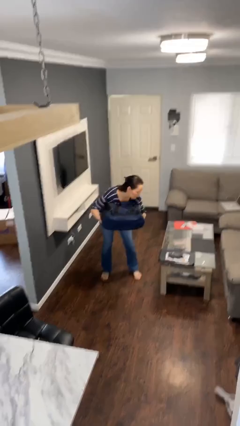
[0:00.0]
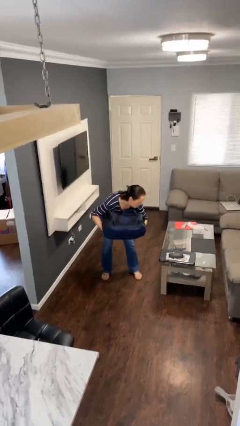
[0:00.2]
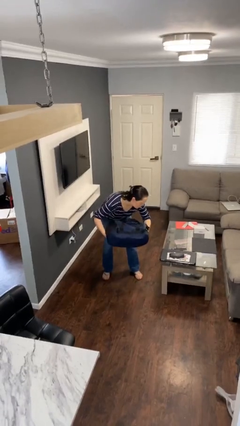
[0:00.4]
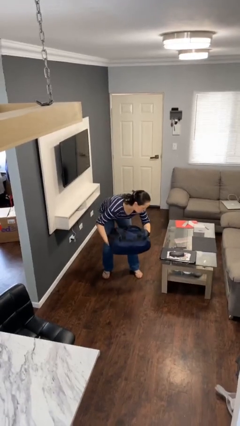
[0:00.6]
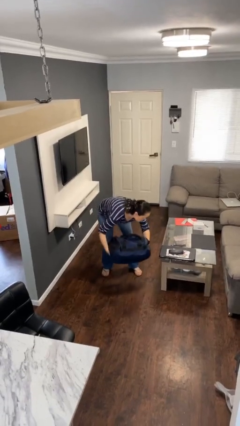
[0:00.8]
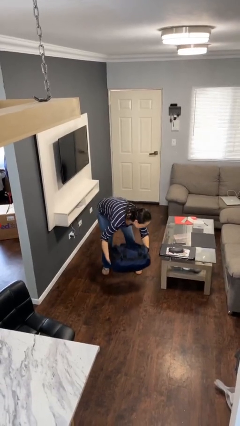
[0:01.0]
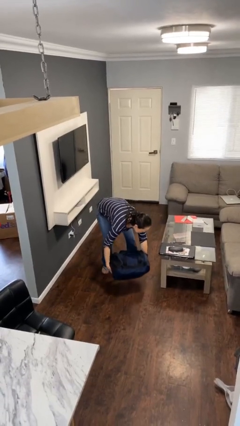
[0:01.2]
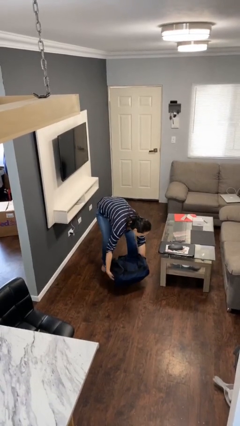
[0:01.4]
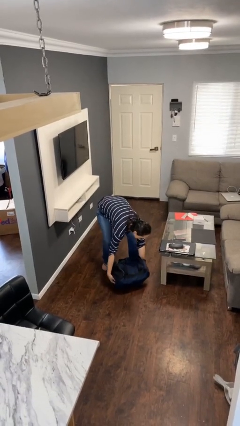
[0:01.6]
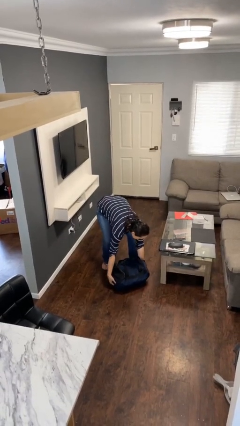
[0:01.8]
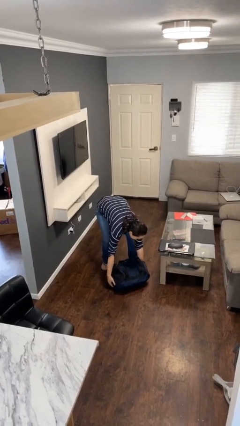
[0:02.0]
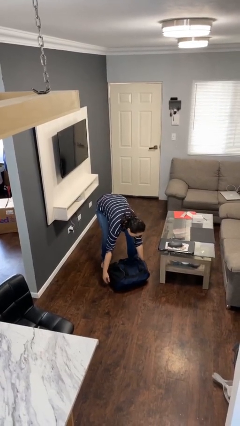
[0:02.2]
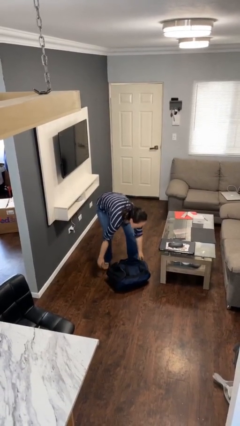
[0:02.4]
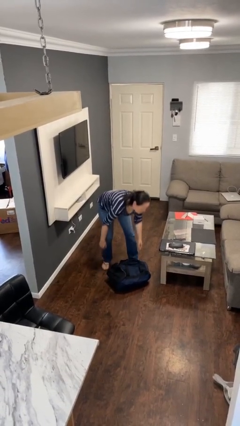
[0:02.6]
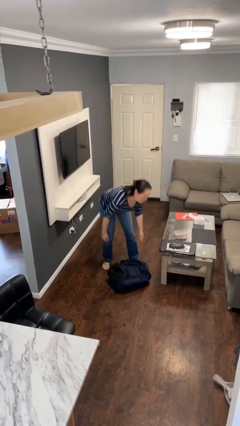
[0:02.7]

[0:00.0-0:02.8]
person puts down object on floor

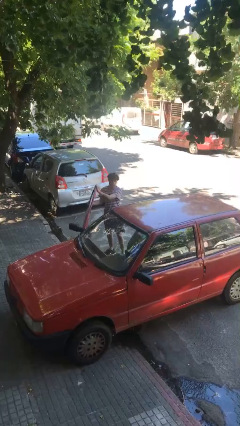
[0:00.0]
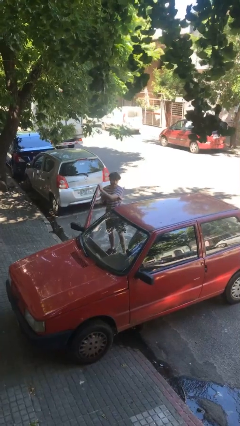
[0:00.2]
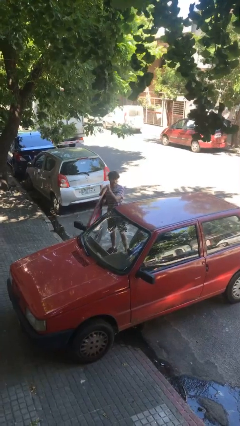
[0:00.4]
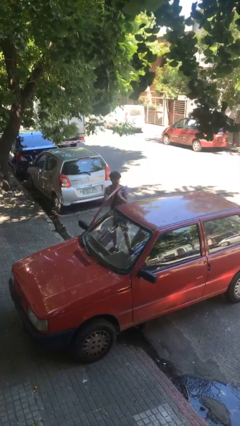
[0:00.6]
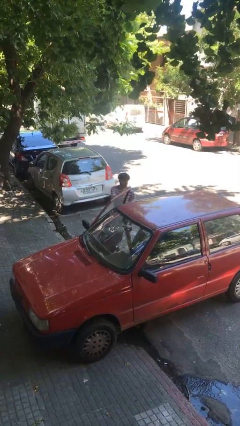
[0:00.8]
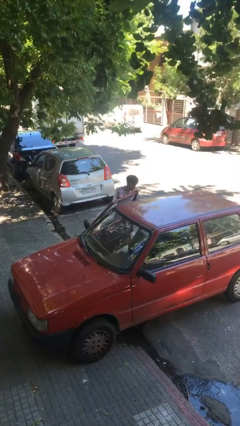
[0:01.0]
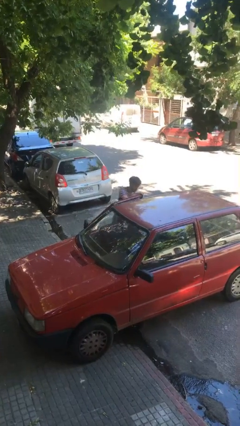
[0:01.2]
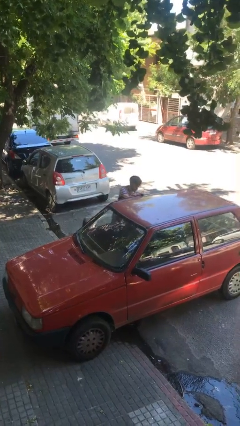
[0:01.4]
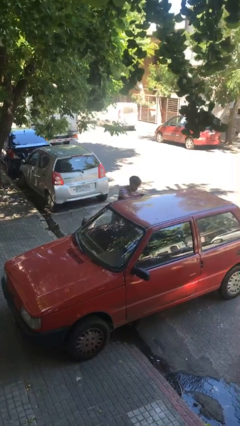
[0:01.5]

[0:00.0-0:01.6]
person closes car door

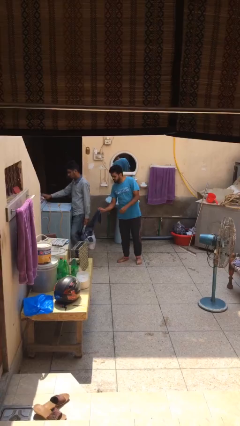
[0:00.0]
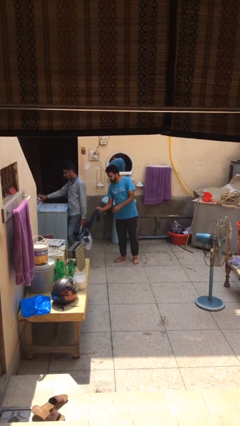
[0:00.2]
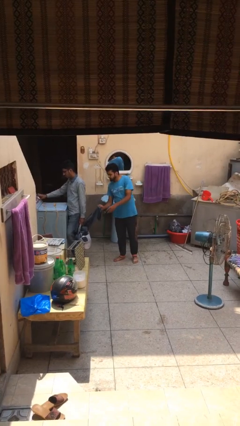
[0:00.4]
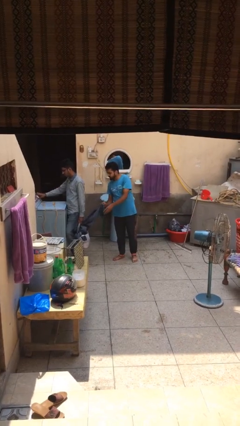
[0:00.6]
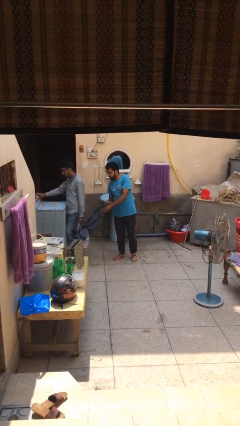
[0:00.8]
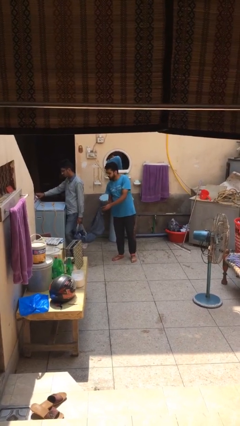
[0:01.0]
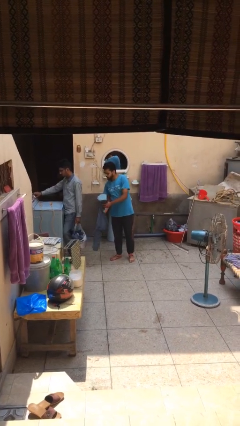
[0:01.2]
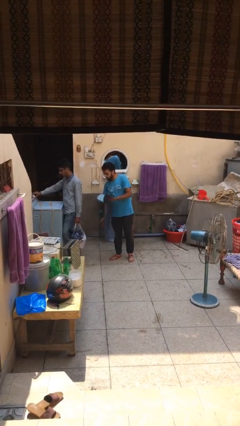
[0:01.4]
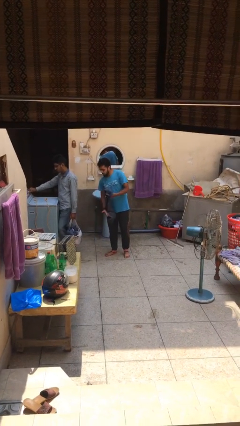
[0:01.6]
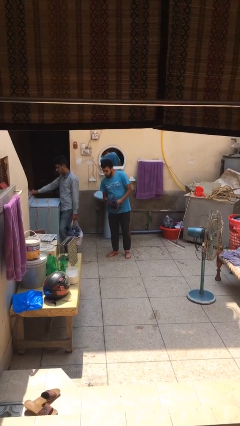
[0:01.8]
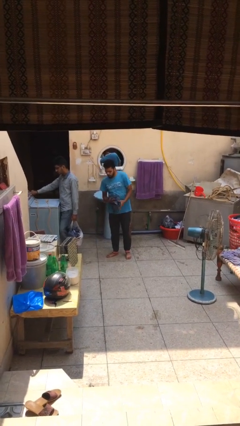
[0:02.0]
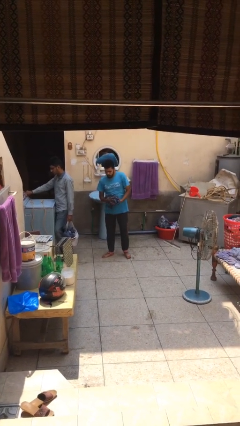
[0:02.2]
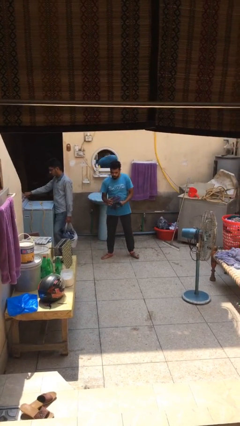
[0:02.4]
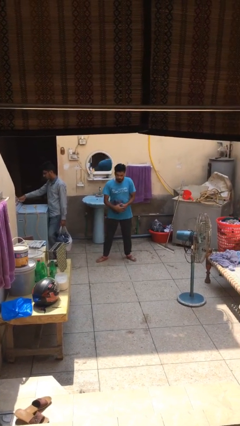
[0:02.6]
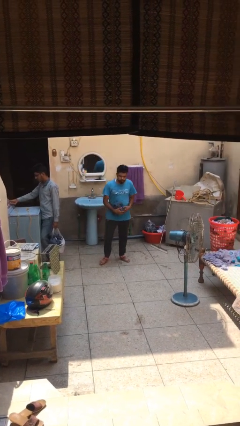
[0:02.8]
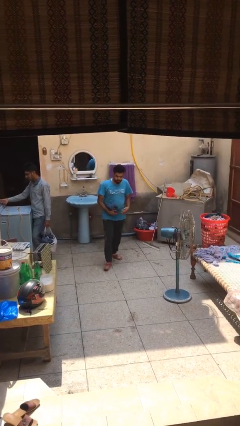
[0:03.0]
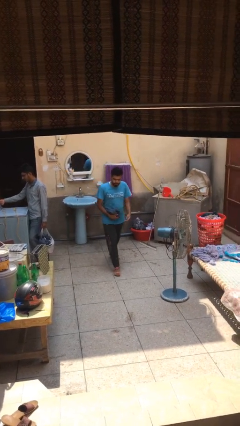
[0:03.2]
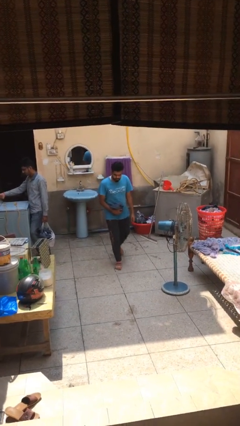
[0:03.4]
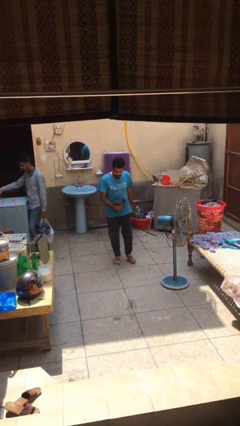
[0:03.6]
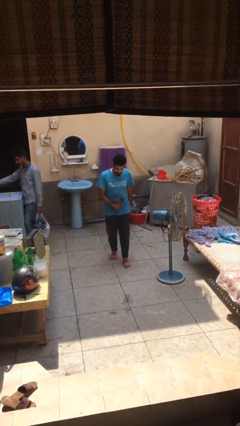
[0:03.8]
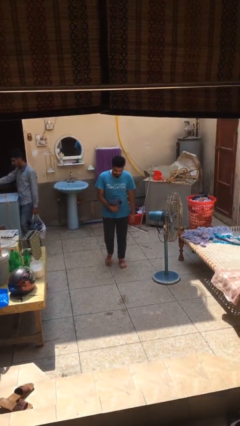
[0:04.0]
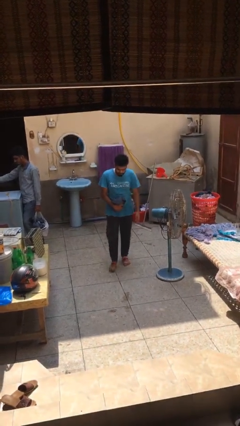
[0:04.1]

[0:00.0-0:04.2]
person steals object from person

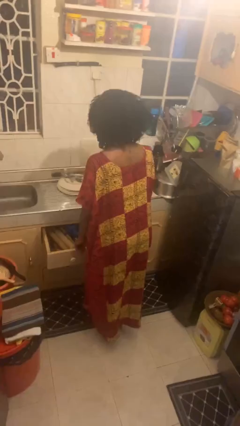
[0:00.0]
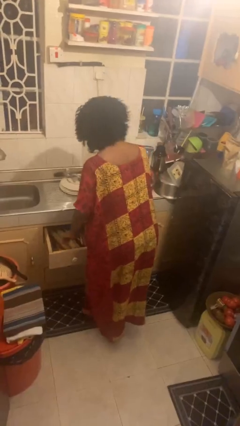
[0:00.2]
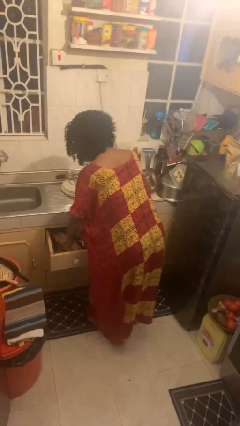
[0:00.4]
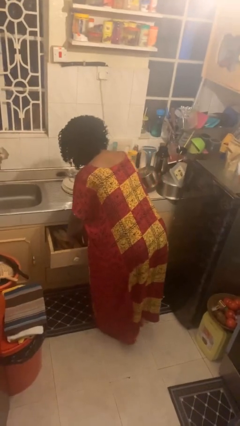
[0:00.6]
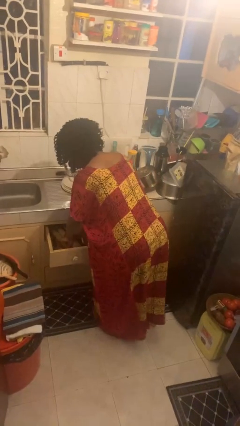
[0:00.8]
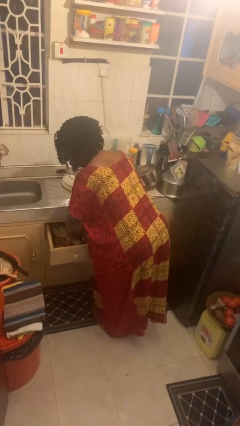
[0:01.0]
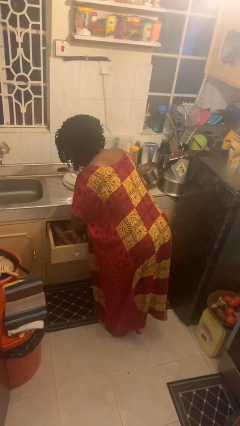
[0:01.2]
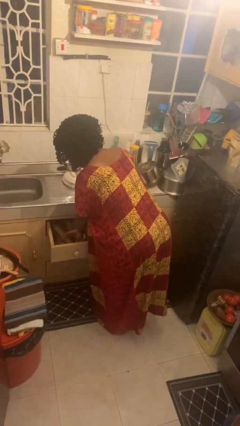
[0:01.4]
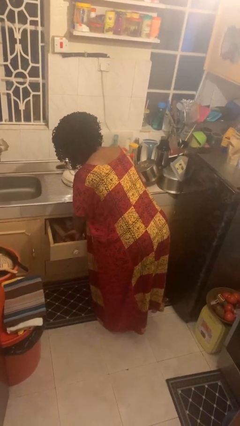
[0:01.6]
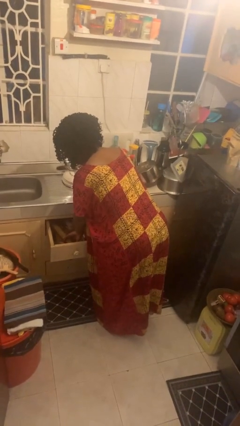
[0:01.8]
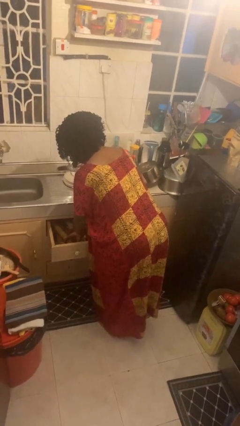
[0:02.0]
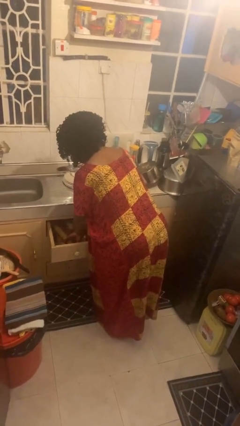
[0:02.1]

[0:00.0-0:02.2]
person searches in kitchen drawer

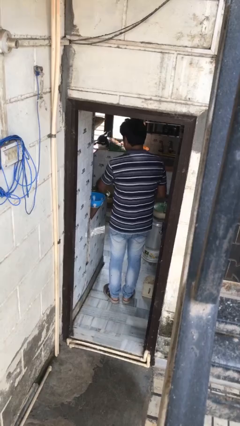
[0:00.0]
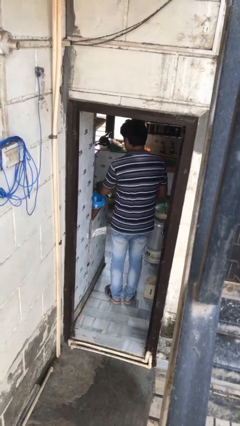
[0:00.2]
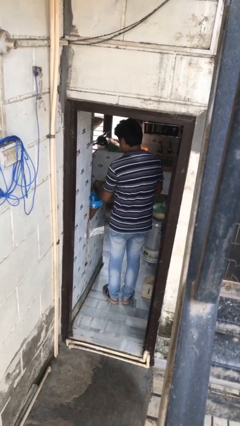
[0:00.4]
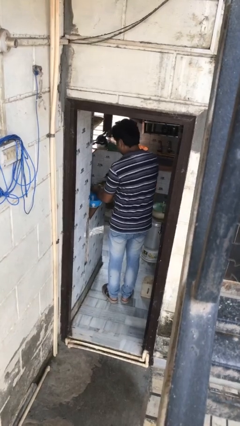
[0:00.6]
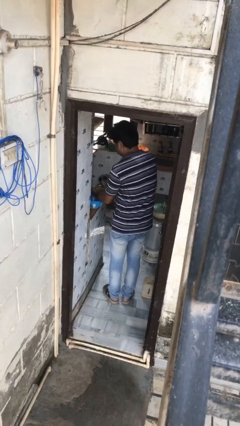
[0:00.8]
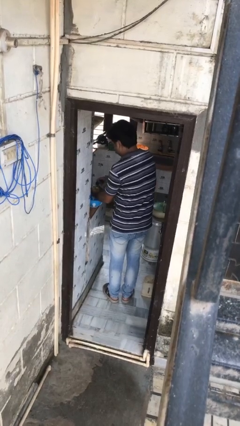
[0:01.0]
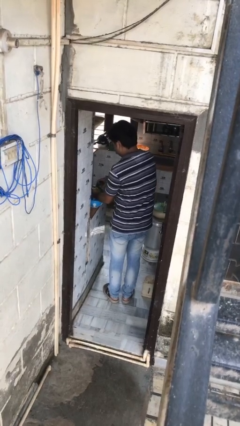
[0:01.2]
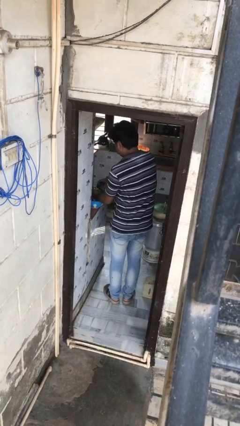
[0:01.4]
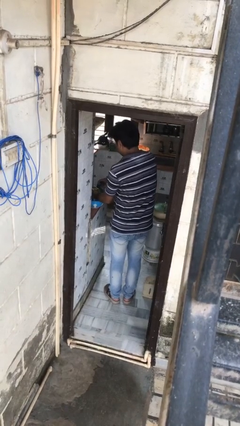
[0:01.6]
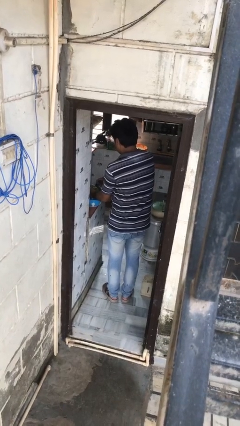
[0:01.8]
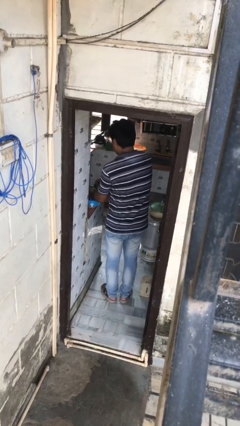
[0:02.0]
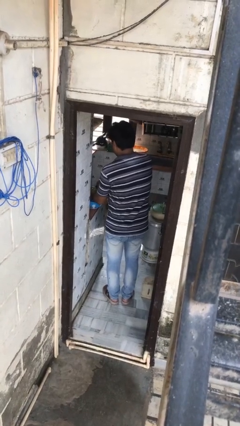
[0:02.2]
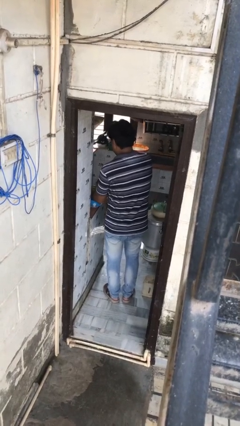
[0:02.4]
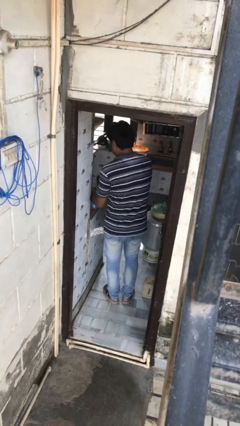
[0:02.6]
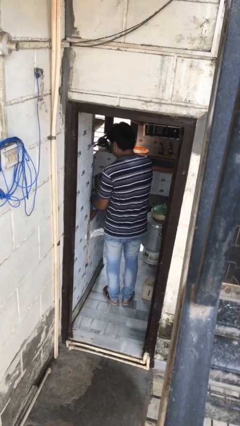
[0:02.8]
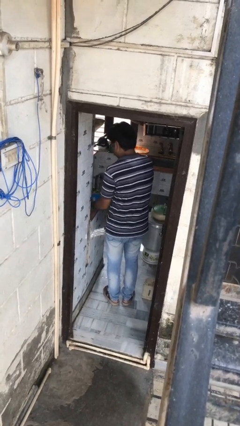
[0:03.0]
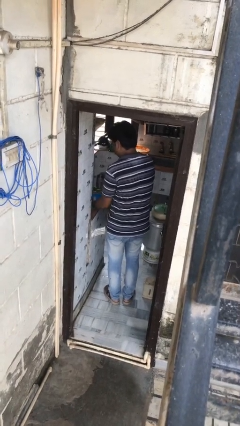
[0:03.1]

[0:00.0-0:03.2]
person washes dish

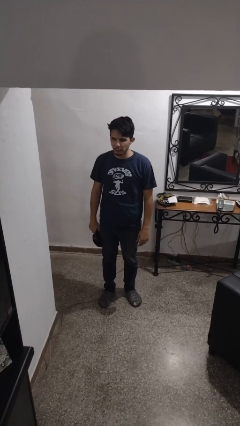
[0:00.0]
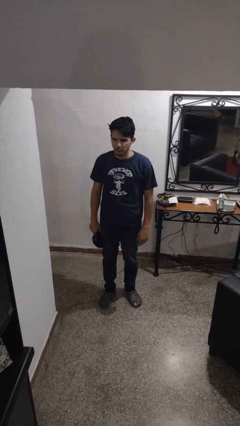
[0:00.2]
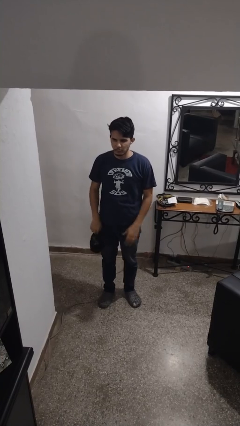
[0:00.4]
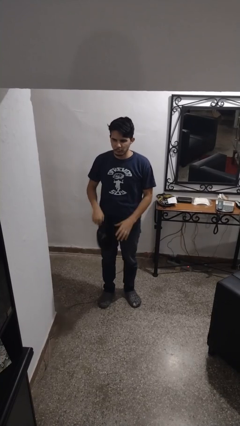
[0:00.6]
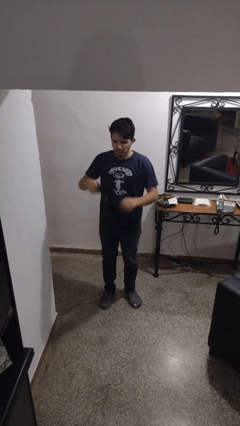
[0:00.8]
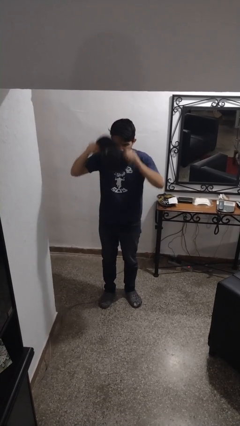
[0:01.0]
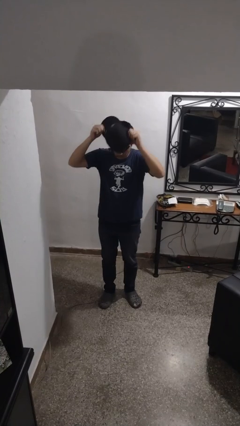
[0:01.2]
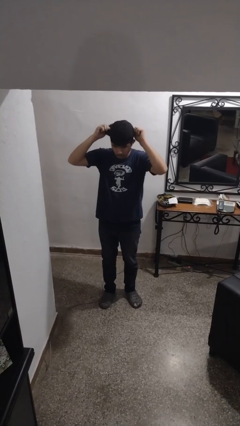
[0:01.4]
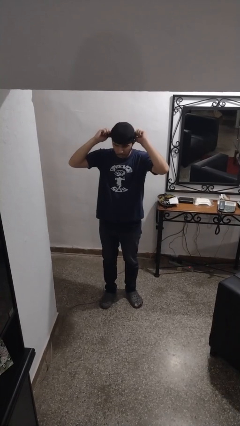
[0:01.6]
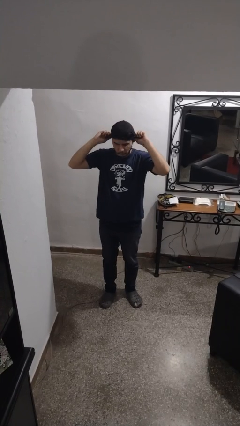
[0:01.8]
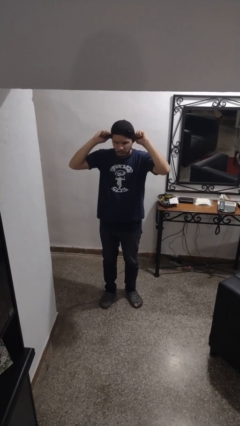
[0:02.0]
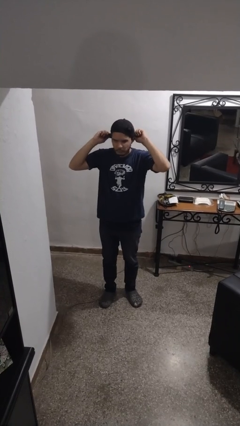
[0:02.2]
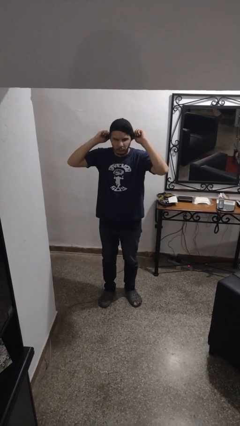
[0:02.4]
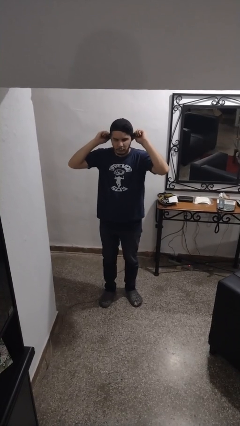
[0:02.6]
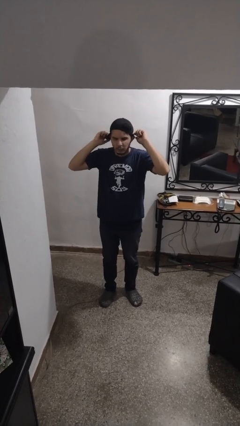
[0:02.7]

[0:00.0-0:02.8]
person puts on hat

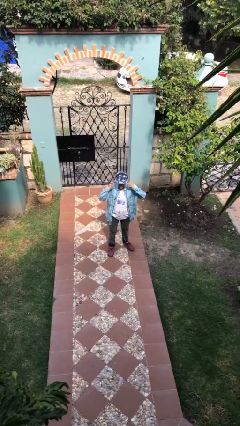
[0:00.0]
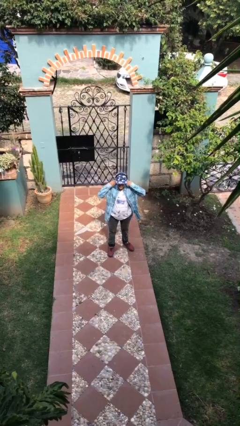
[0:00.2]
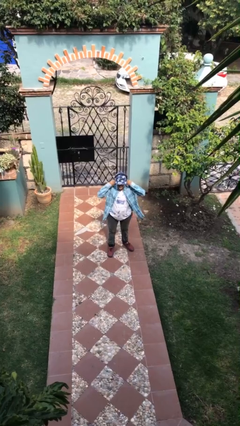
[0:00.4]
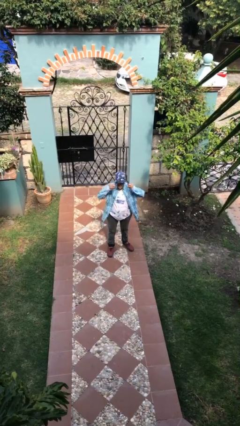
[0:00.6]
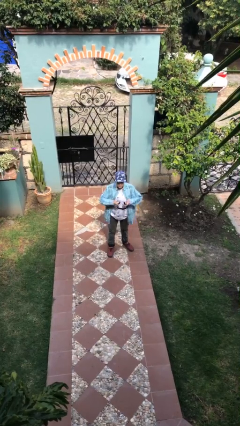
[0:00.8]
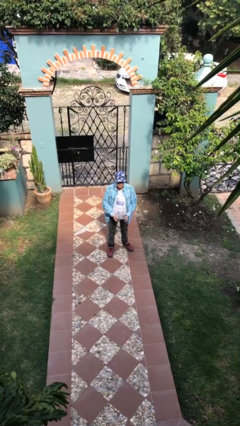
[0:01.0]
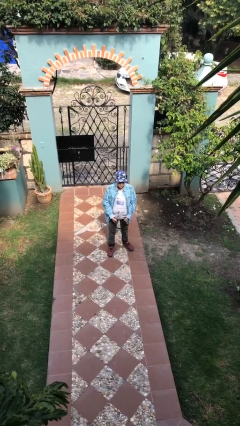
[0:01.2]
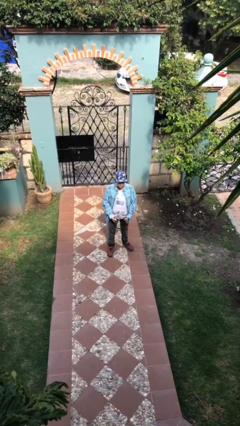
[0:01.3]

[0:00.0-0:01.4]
person takes off headphones
